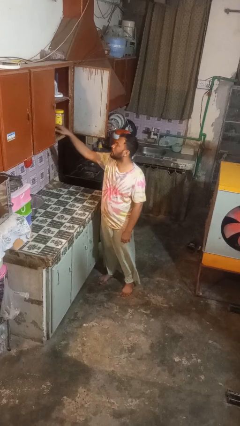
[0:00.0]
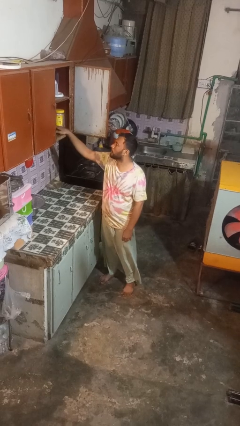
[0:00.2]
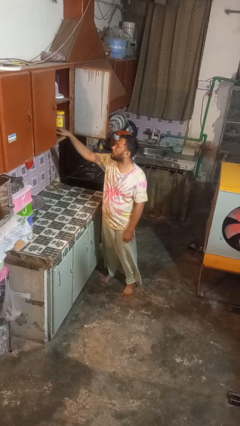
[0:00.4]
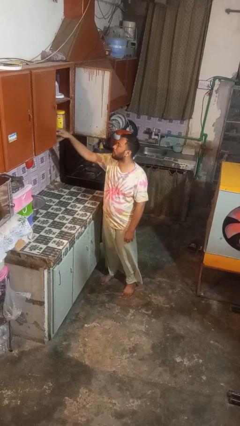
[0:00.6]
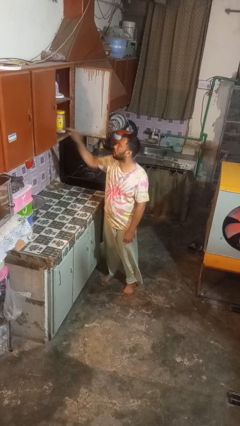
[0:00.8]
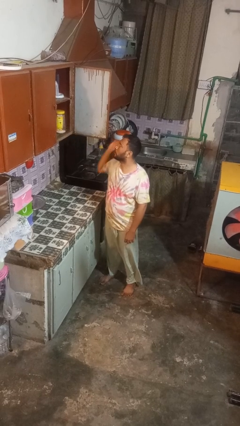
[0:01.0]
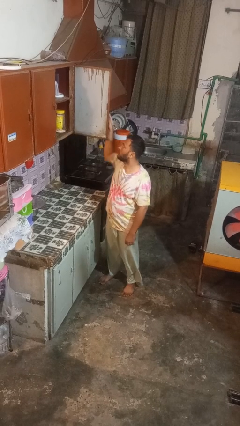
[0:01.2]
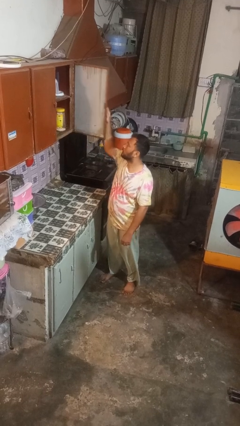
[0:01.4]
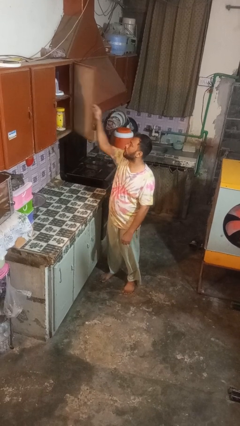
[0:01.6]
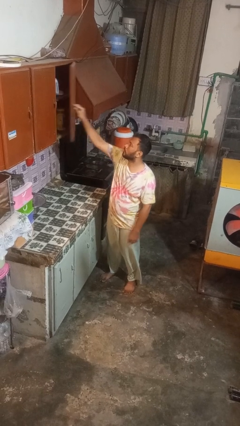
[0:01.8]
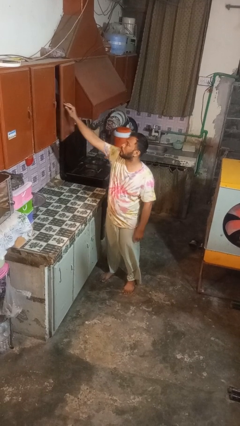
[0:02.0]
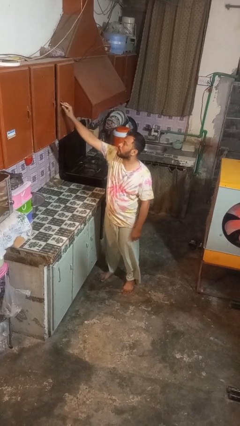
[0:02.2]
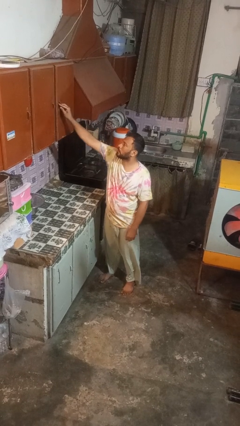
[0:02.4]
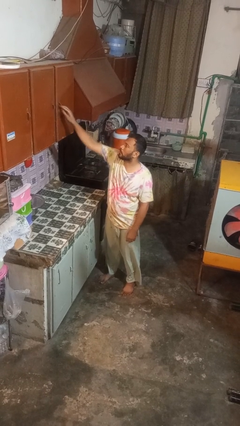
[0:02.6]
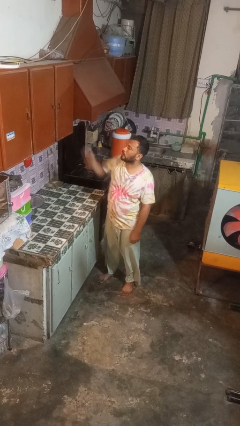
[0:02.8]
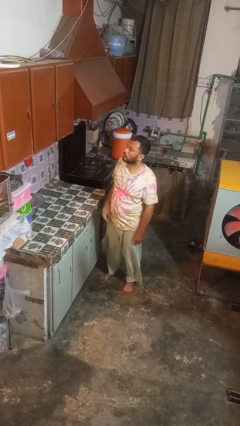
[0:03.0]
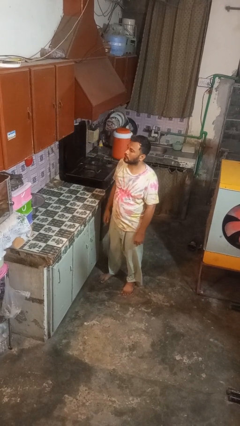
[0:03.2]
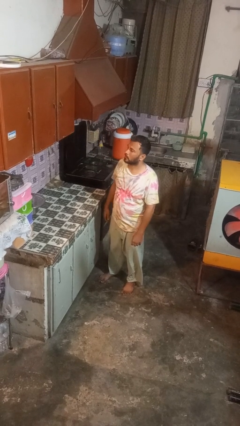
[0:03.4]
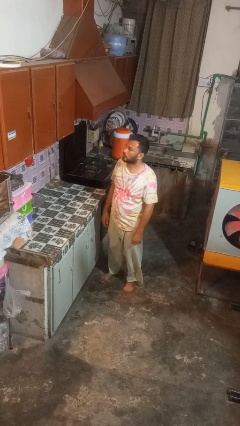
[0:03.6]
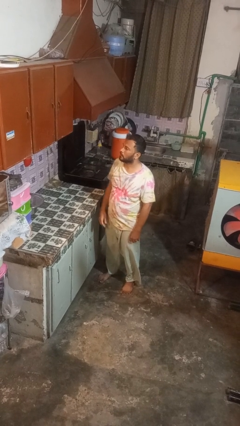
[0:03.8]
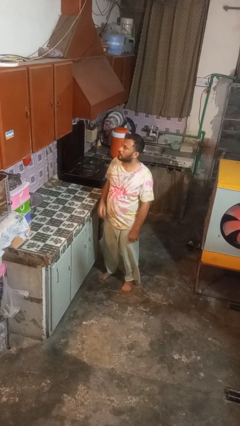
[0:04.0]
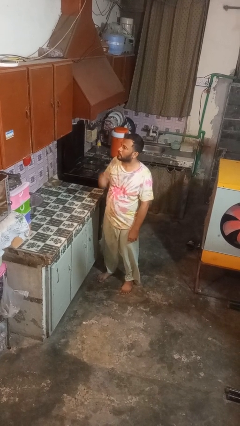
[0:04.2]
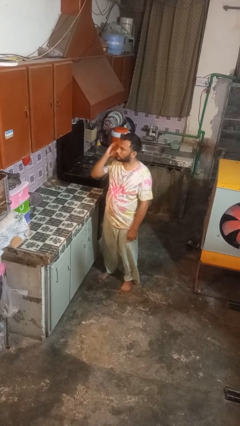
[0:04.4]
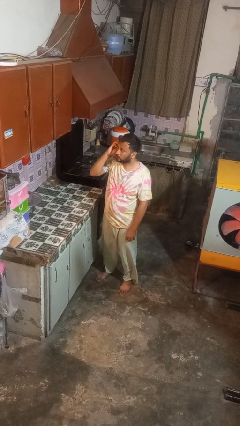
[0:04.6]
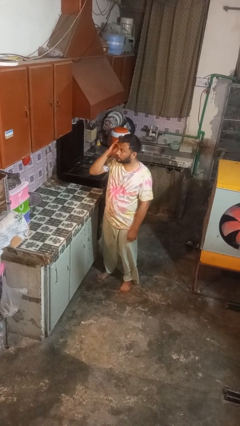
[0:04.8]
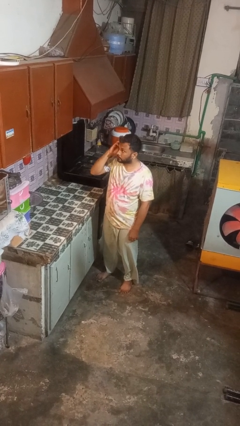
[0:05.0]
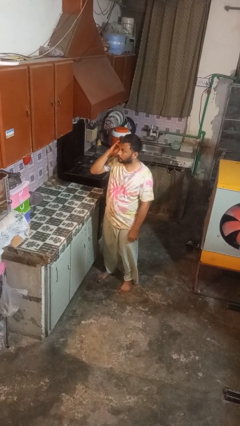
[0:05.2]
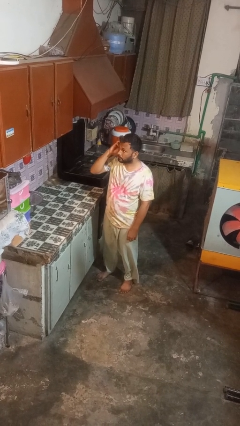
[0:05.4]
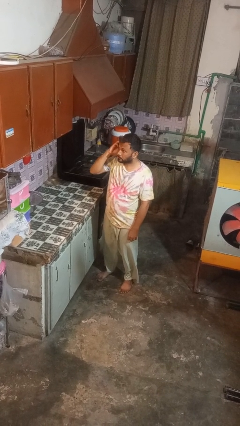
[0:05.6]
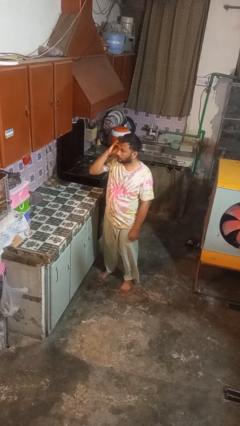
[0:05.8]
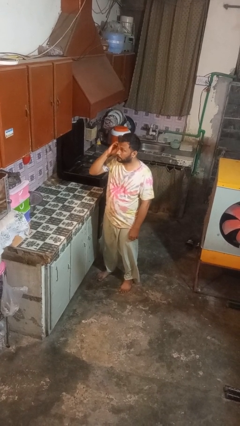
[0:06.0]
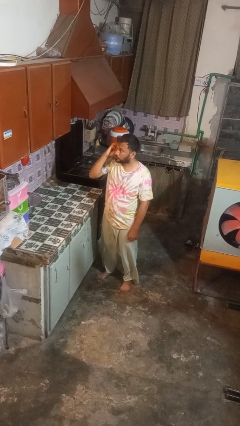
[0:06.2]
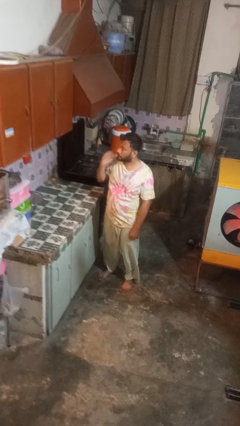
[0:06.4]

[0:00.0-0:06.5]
person closes cabinet

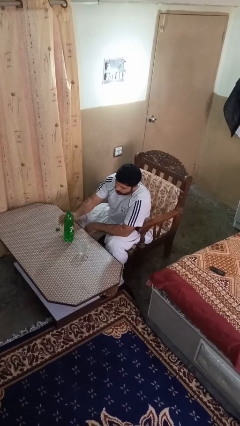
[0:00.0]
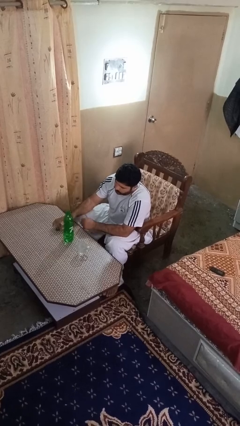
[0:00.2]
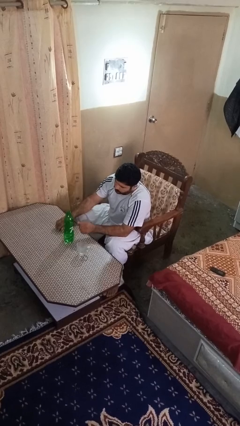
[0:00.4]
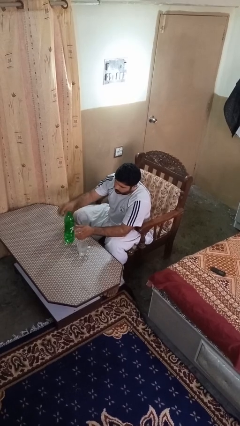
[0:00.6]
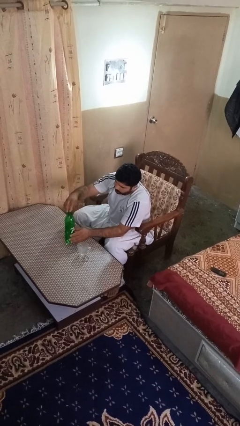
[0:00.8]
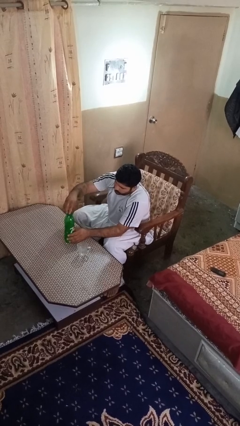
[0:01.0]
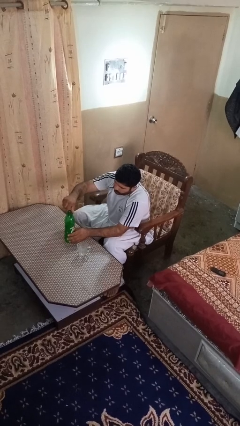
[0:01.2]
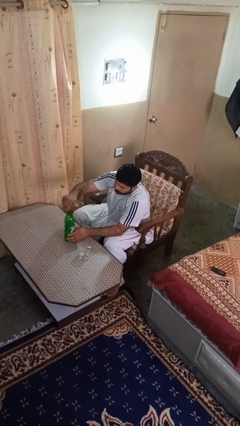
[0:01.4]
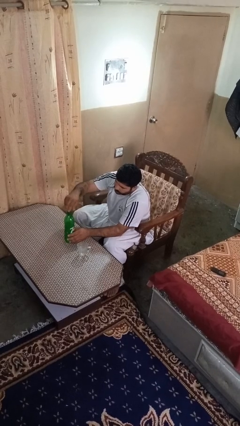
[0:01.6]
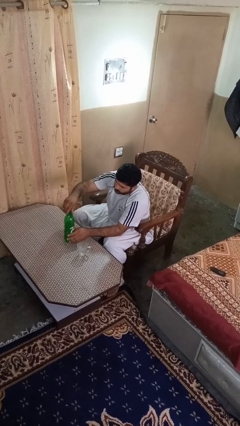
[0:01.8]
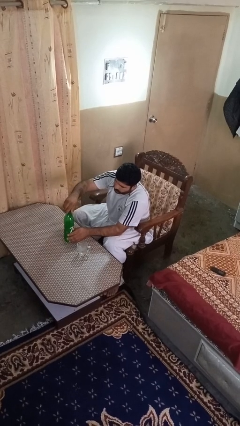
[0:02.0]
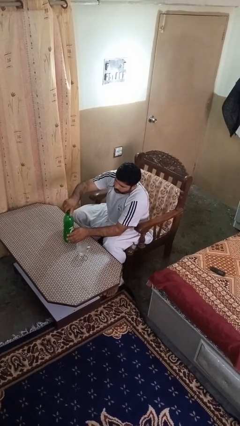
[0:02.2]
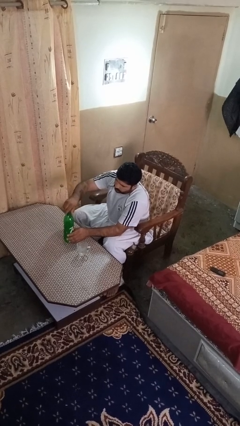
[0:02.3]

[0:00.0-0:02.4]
person screws lid to bottle

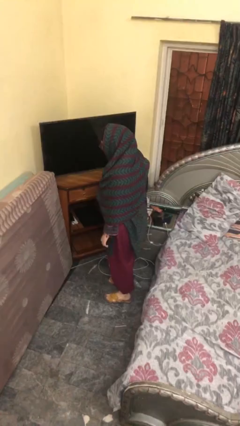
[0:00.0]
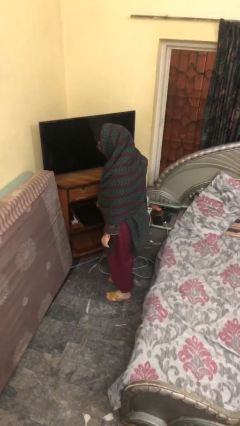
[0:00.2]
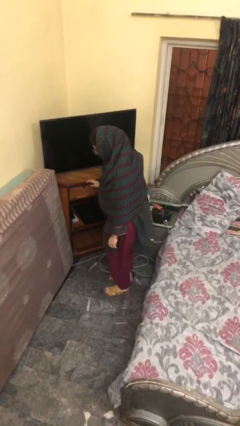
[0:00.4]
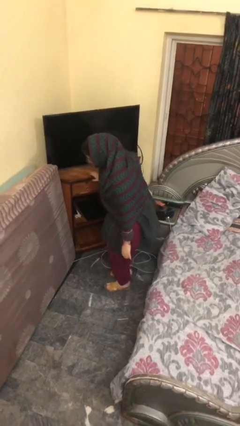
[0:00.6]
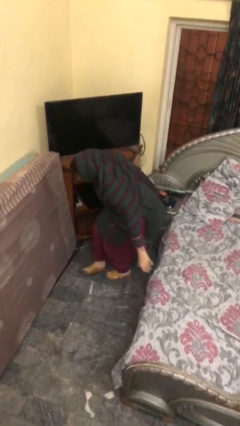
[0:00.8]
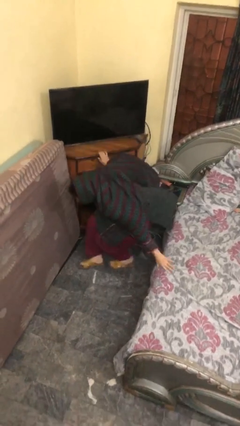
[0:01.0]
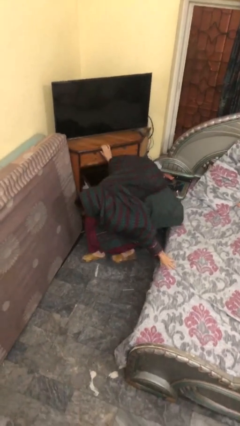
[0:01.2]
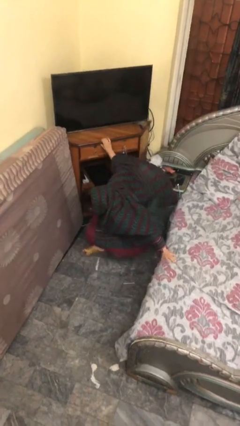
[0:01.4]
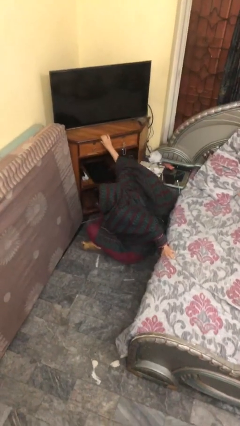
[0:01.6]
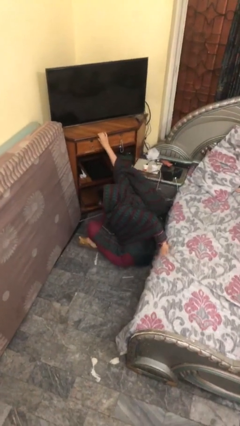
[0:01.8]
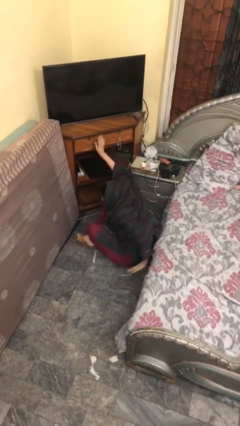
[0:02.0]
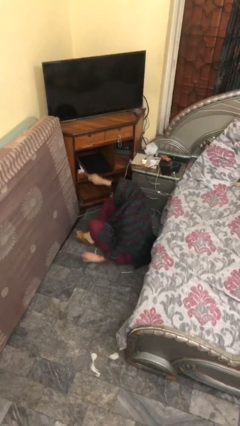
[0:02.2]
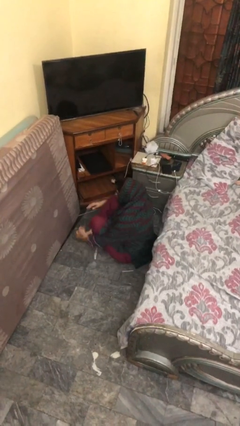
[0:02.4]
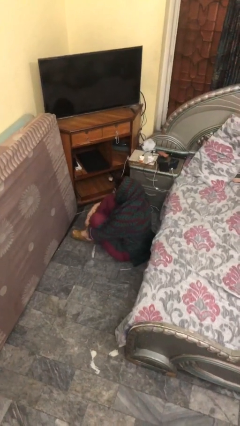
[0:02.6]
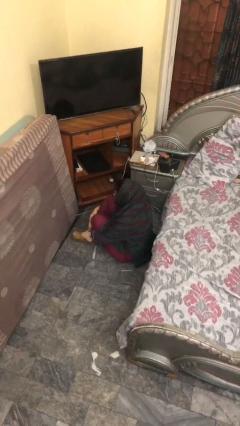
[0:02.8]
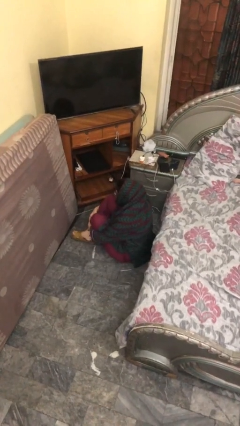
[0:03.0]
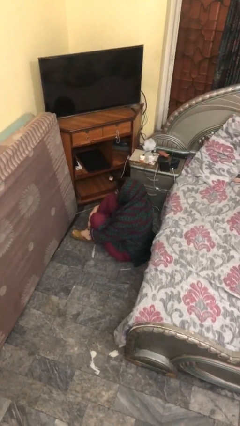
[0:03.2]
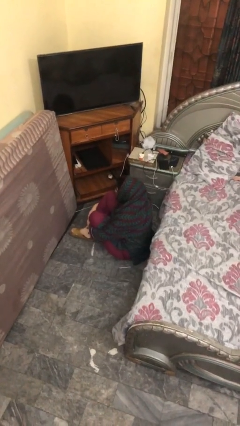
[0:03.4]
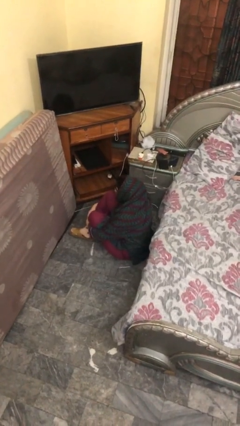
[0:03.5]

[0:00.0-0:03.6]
person sits crisscross

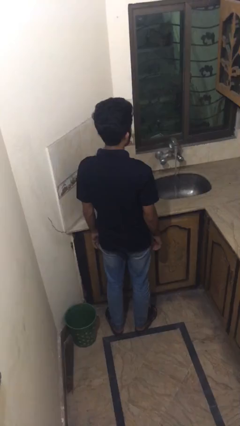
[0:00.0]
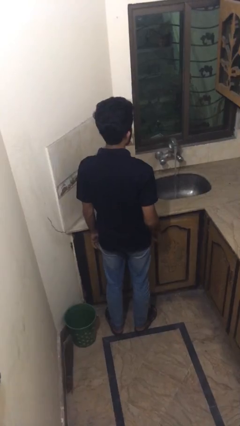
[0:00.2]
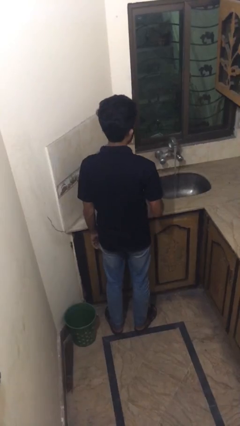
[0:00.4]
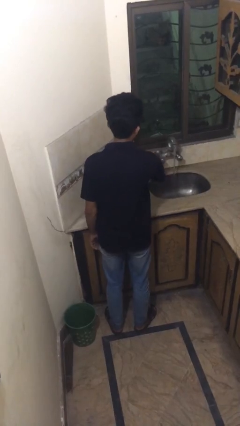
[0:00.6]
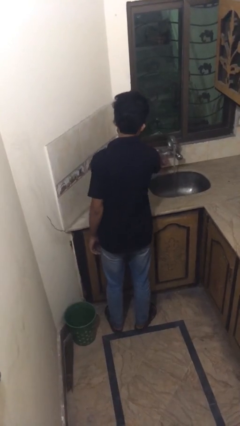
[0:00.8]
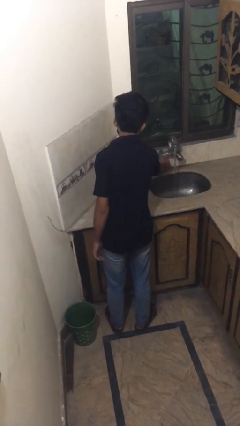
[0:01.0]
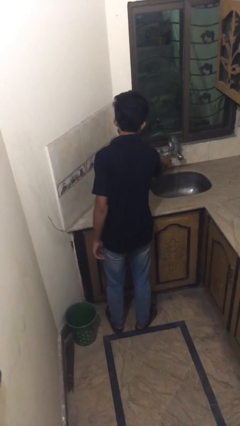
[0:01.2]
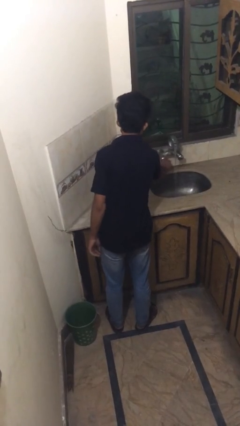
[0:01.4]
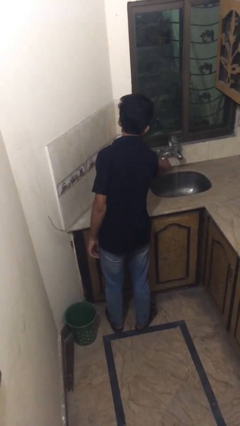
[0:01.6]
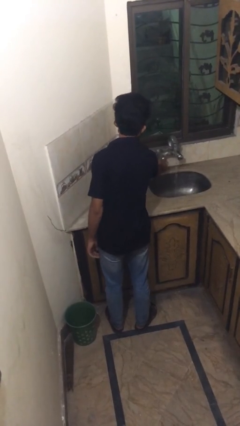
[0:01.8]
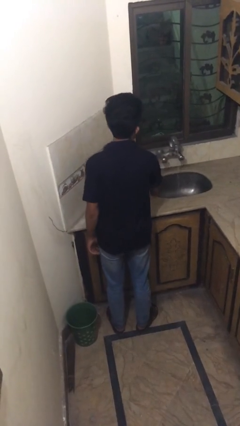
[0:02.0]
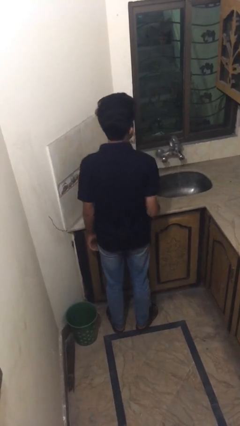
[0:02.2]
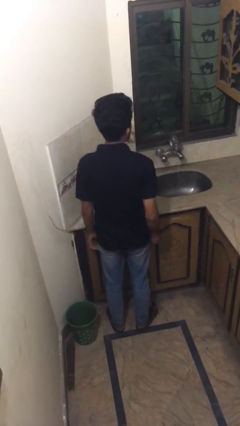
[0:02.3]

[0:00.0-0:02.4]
person turns off faucet

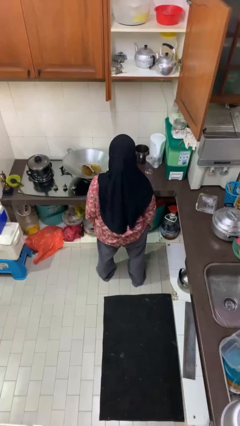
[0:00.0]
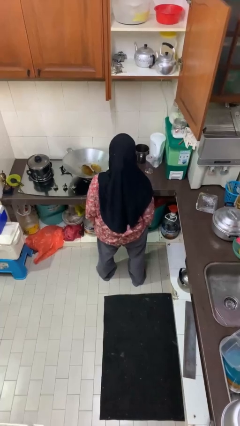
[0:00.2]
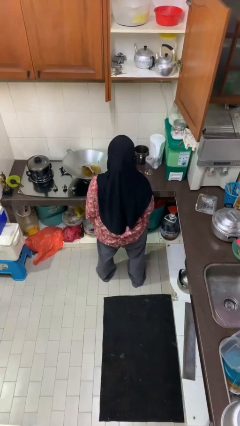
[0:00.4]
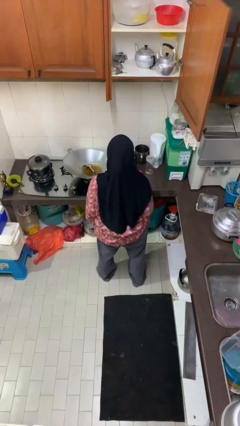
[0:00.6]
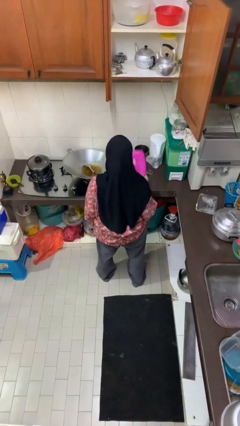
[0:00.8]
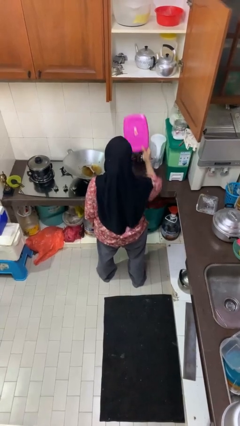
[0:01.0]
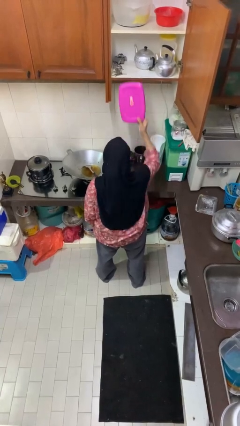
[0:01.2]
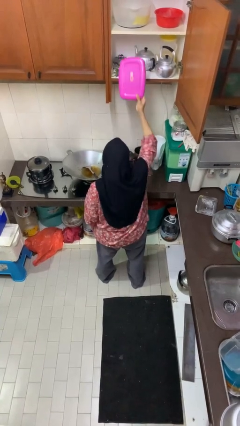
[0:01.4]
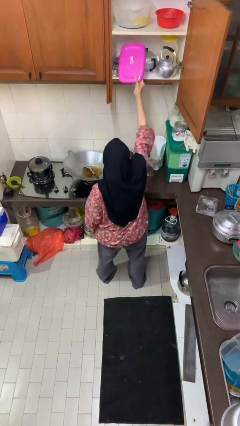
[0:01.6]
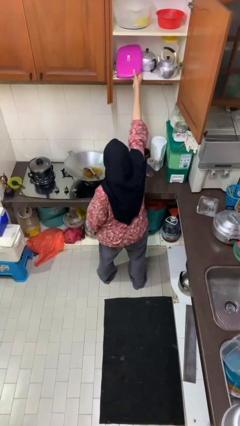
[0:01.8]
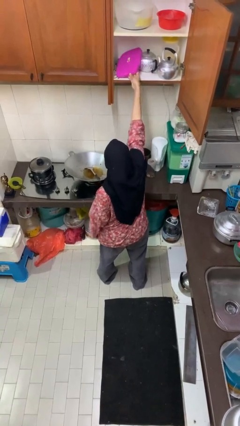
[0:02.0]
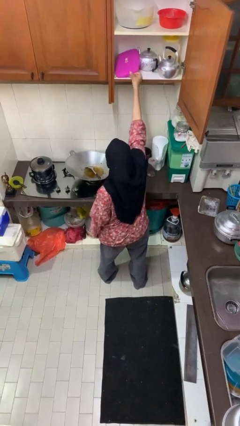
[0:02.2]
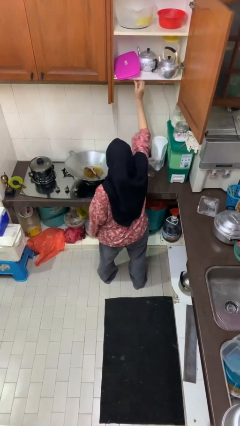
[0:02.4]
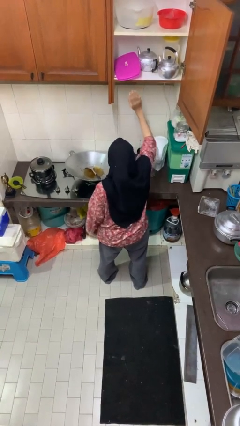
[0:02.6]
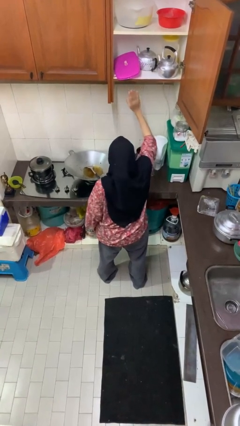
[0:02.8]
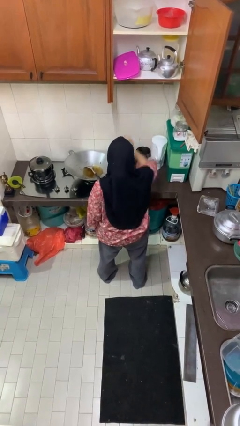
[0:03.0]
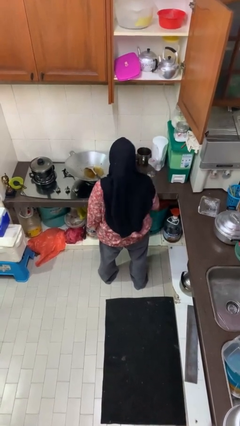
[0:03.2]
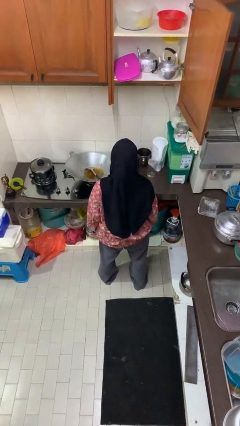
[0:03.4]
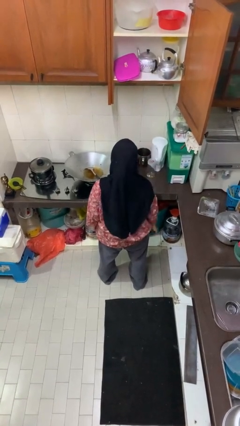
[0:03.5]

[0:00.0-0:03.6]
person puts object in cabinet
